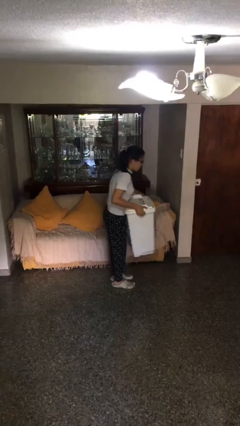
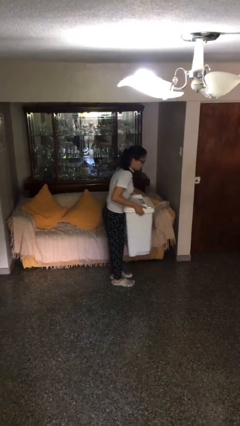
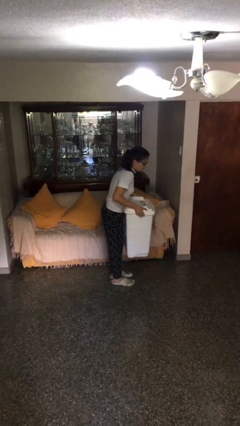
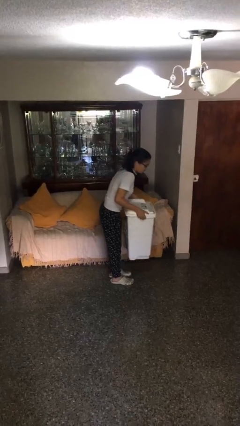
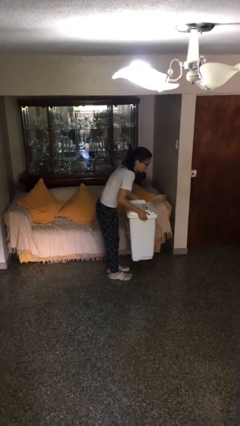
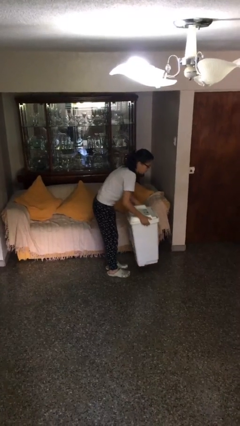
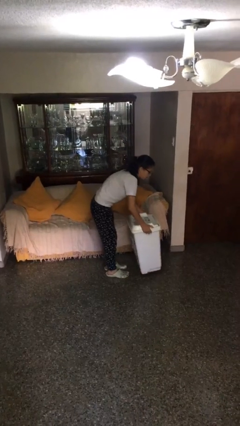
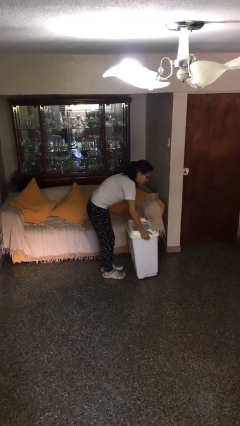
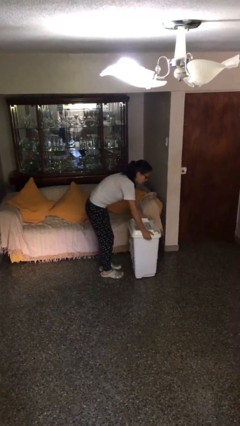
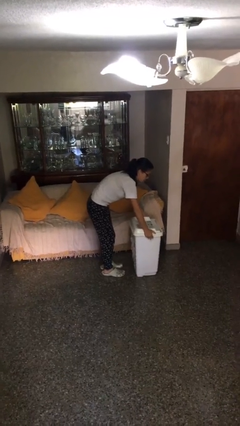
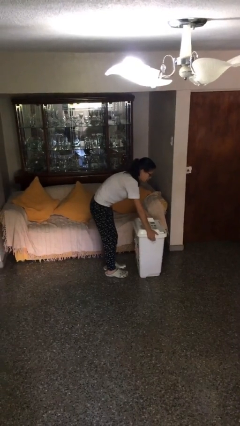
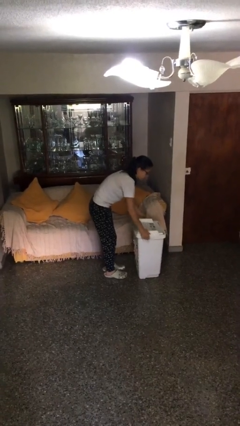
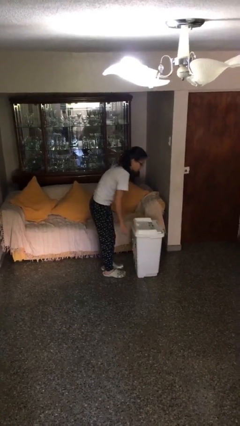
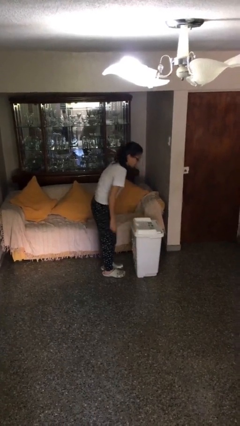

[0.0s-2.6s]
person puts down object on floor

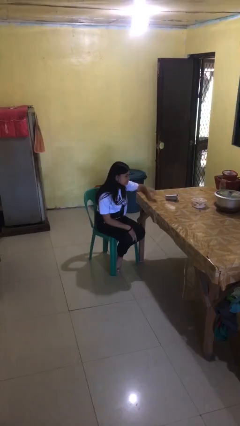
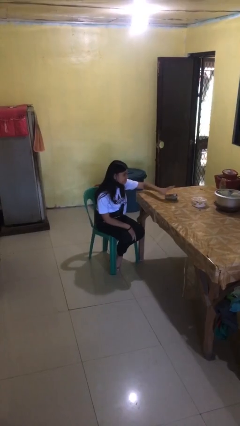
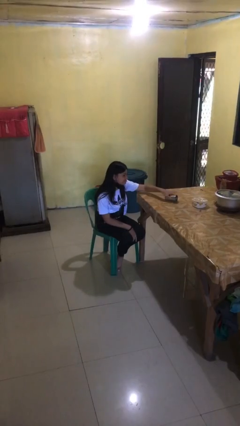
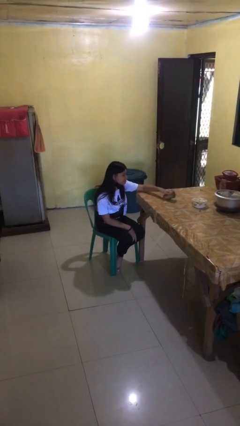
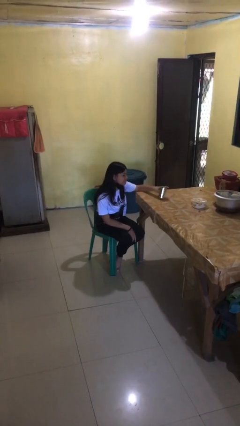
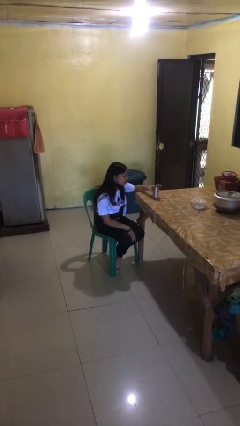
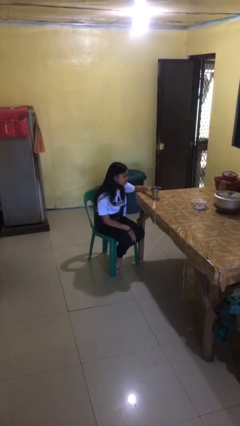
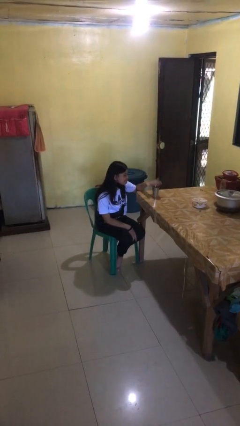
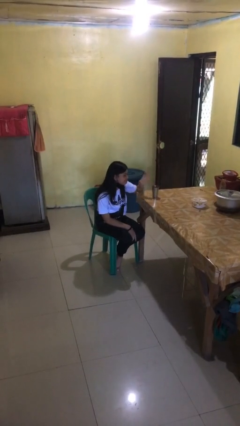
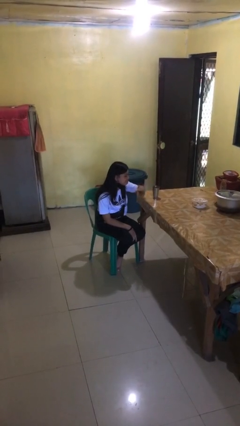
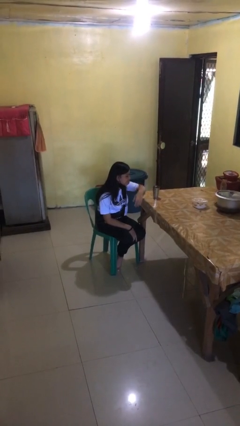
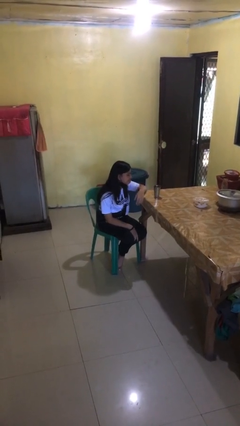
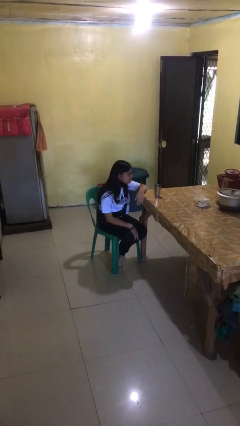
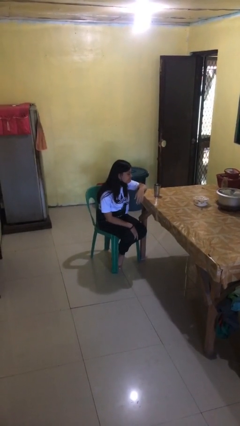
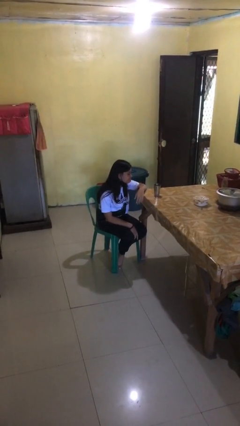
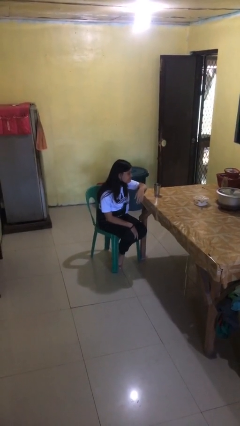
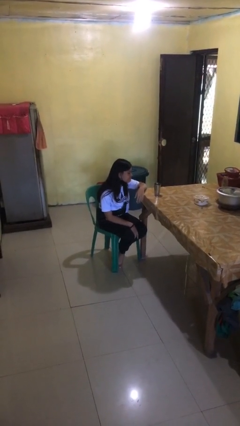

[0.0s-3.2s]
person sets upright glass

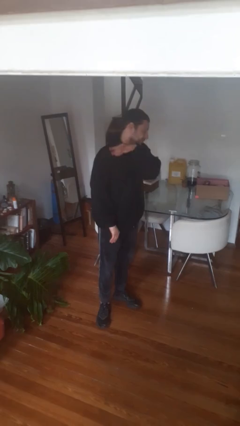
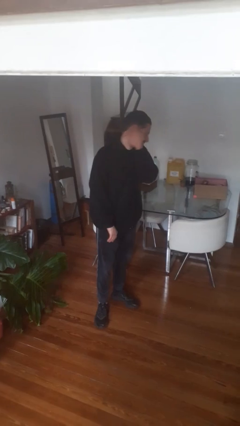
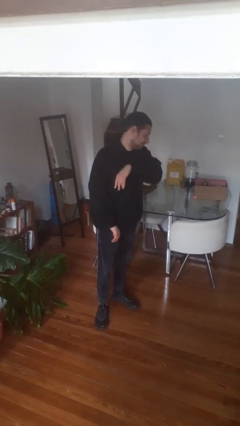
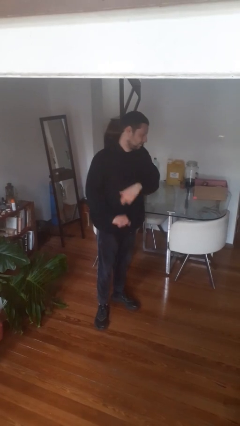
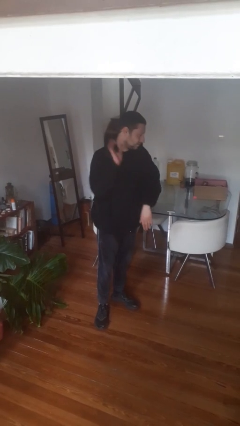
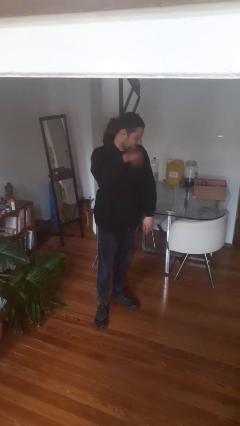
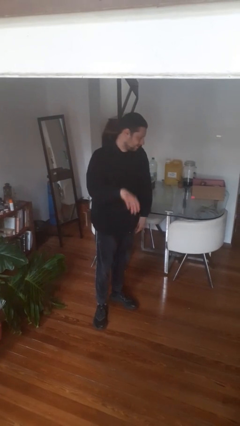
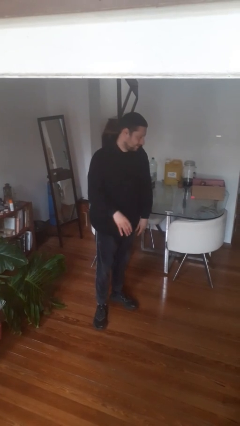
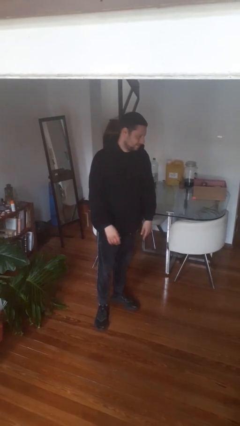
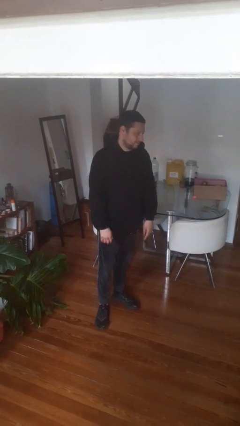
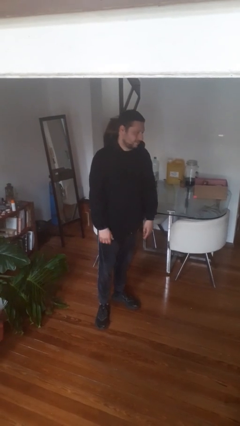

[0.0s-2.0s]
person swats bug

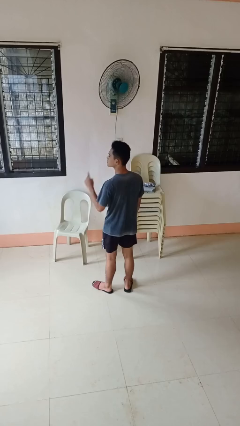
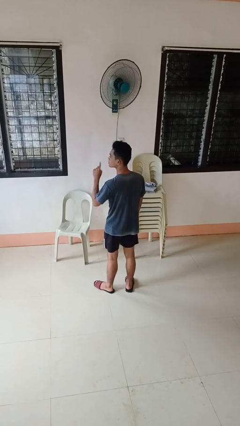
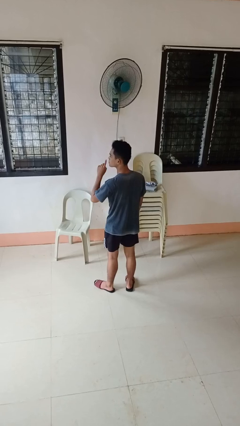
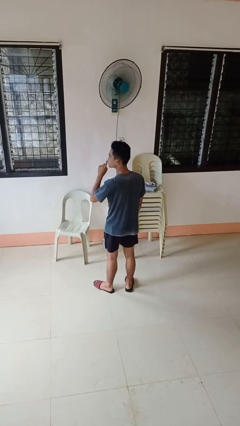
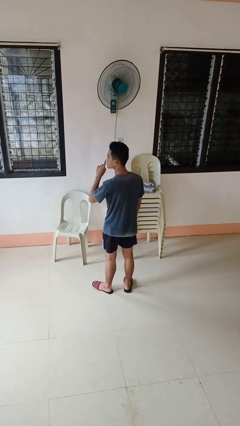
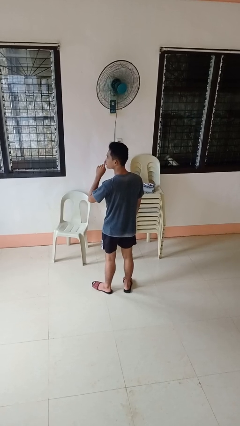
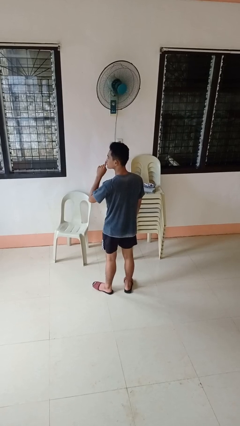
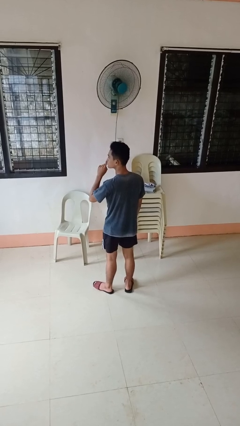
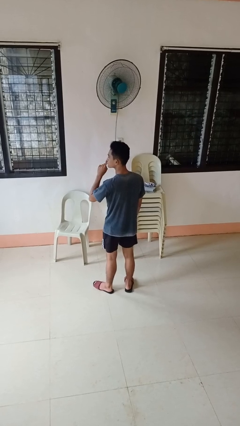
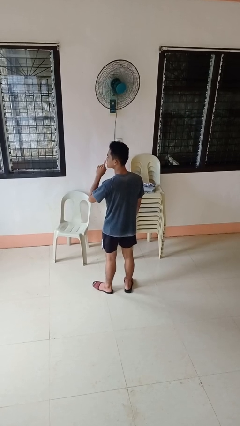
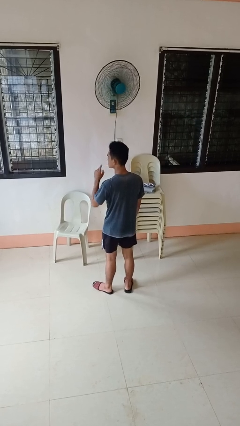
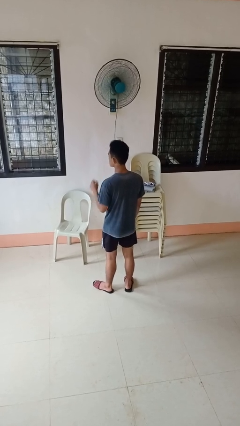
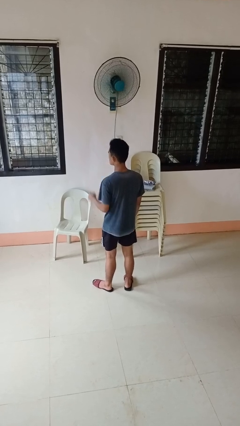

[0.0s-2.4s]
person gestures be quiet

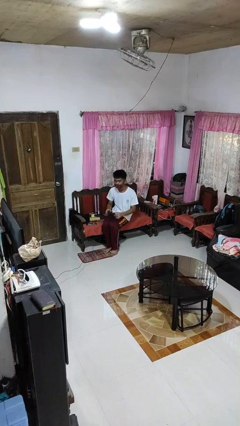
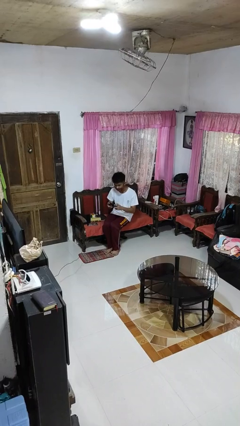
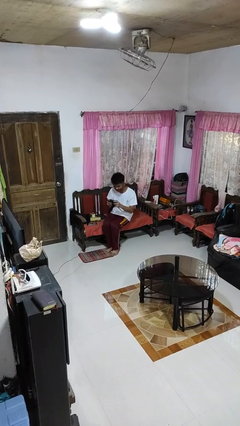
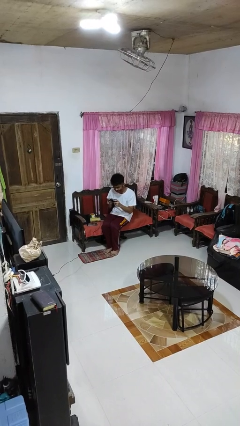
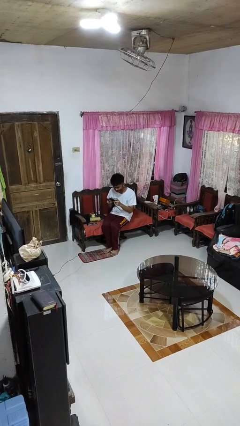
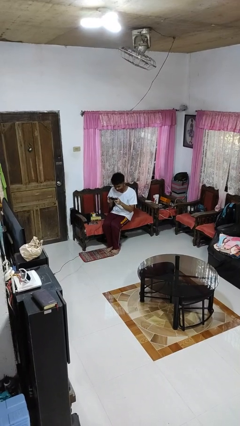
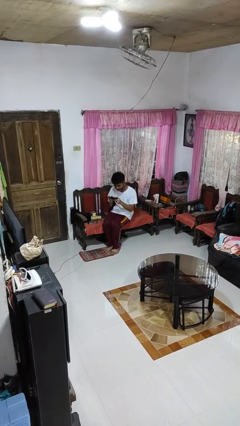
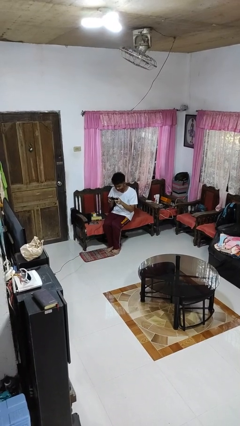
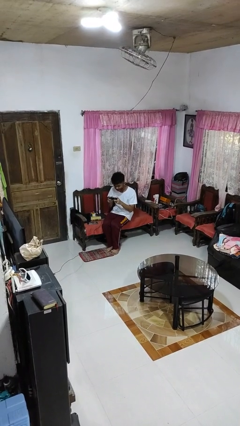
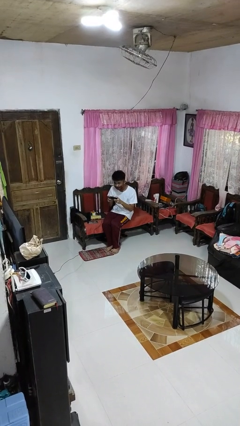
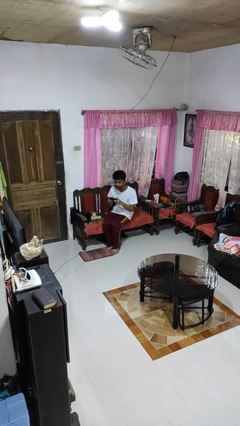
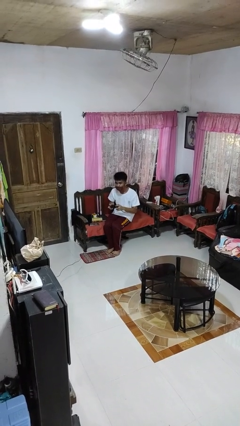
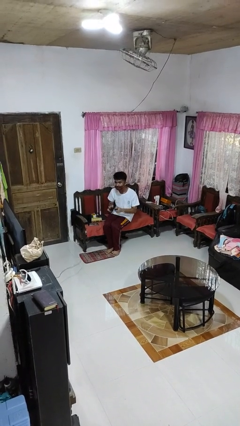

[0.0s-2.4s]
person interacts with handheld game

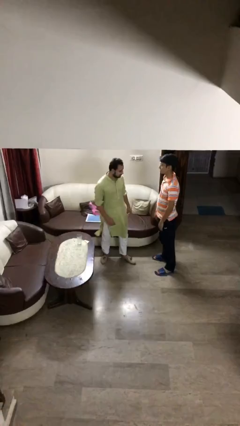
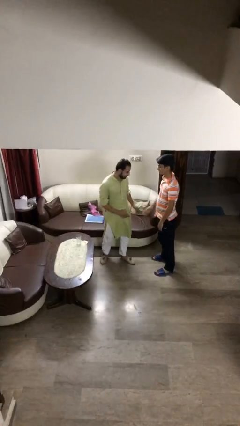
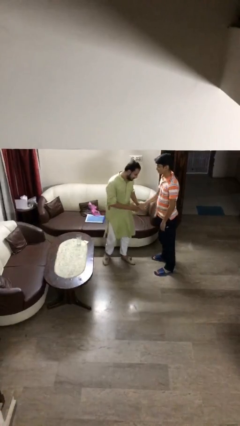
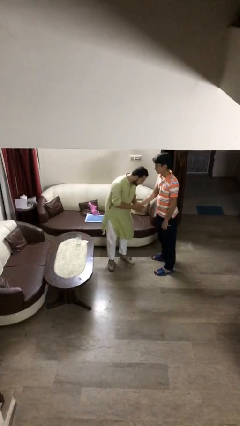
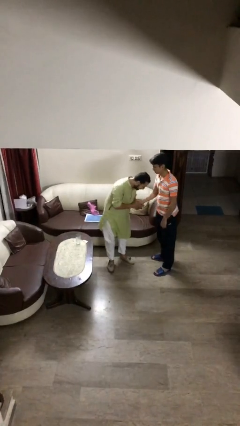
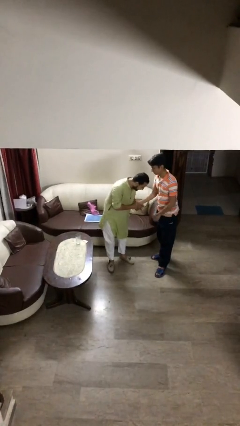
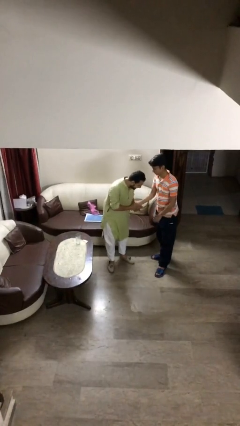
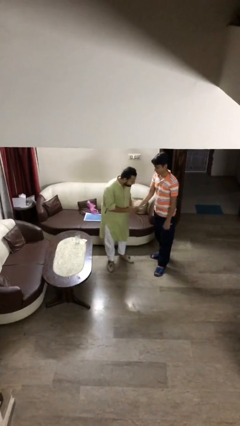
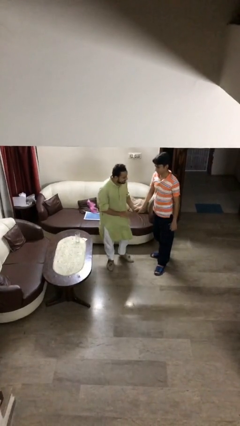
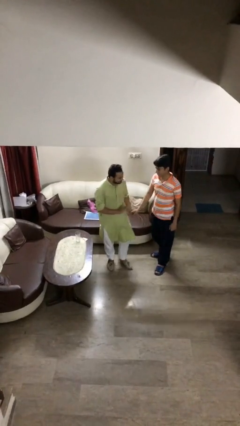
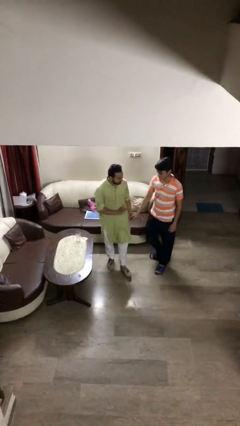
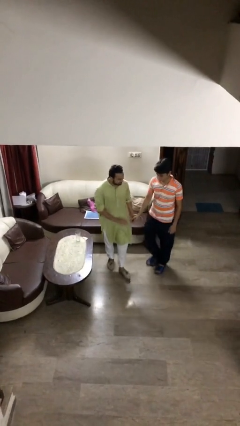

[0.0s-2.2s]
person shakes hand

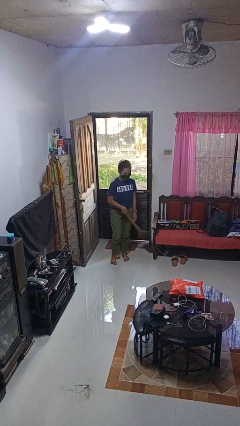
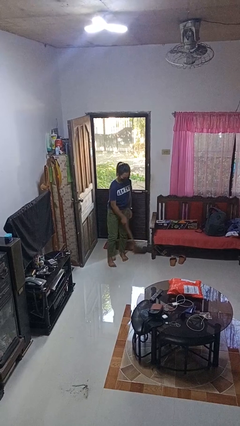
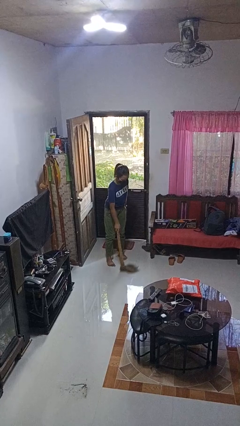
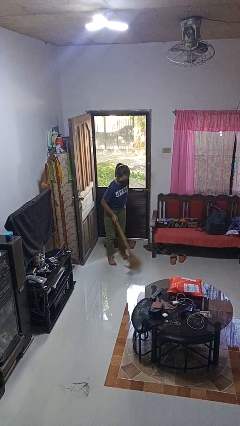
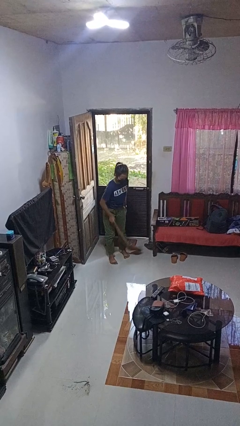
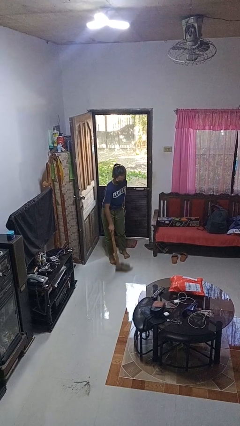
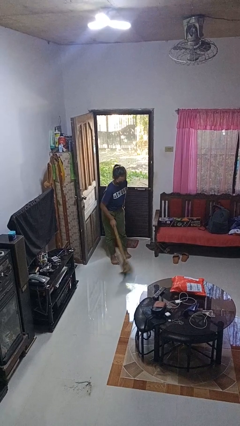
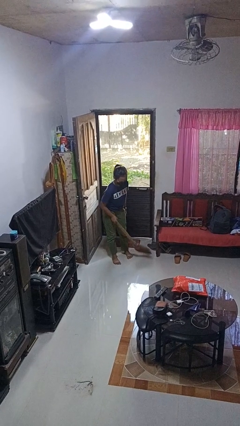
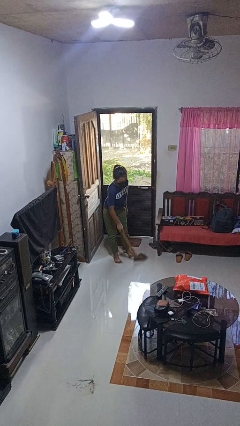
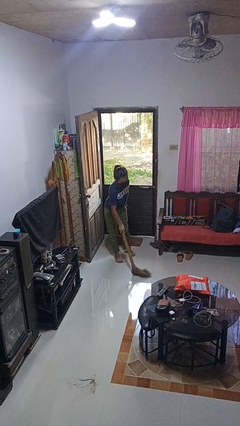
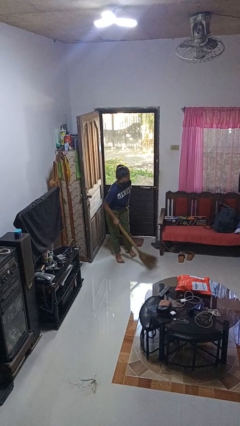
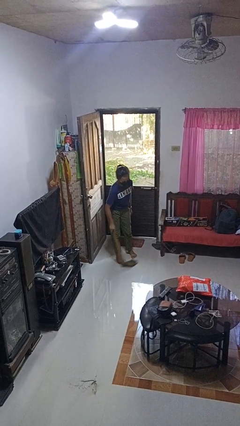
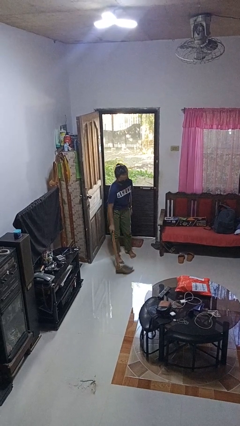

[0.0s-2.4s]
person sweeps floor
